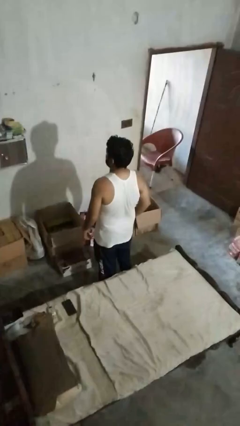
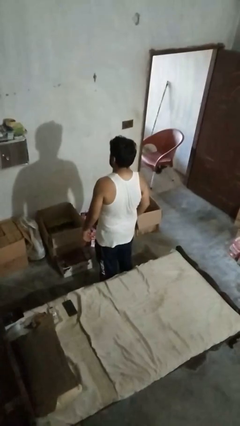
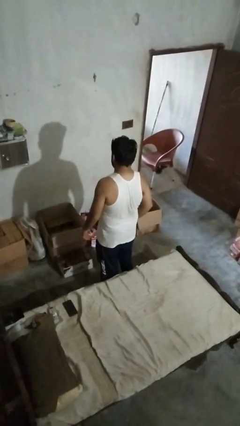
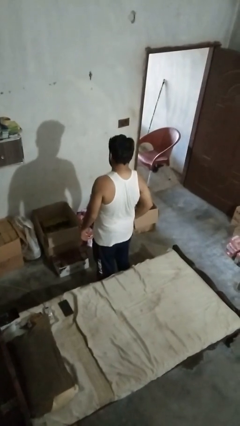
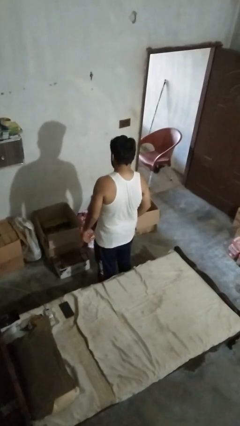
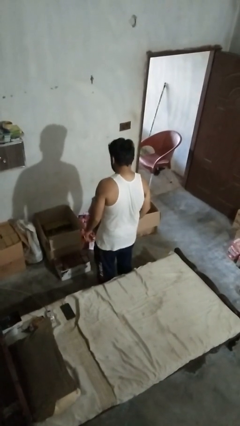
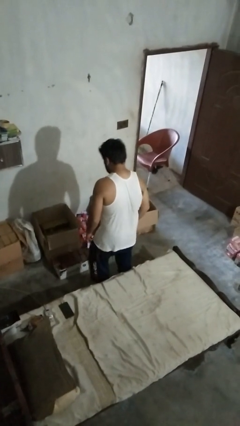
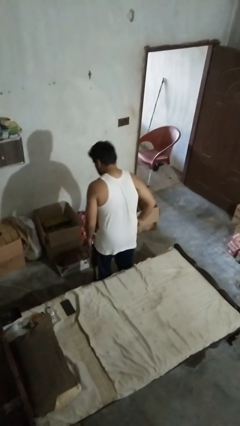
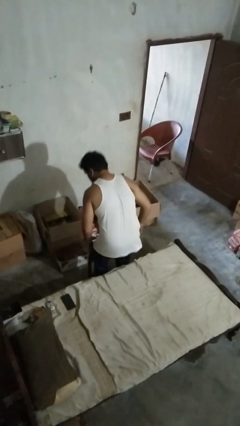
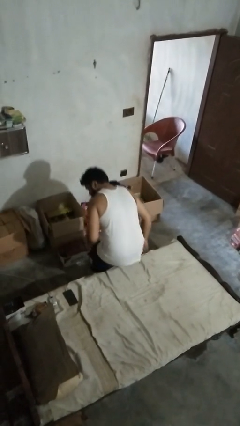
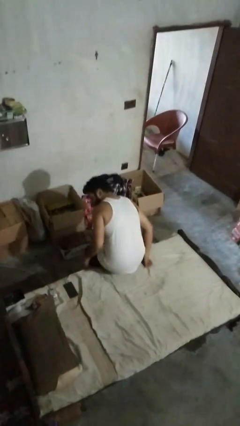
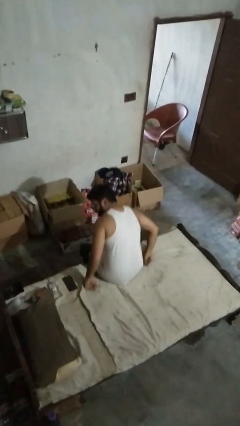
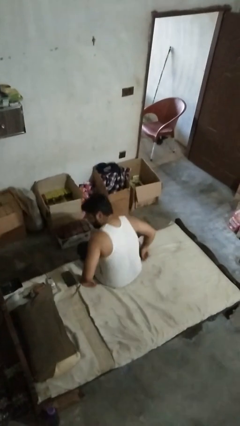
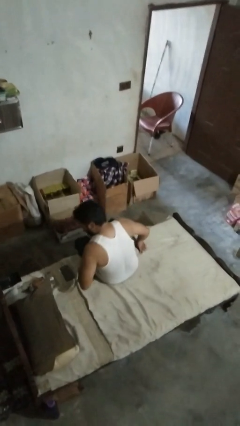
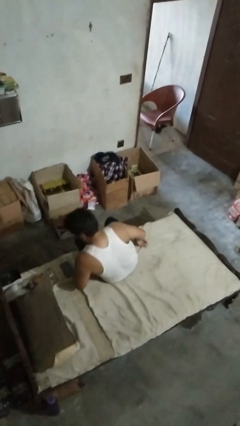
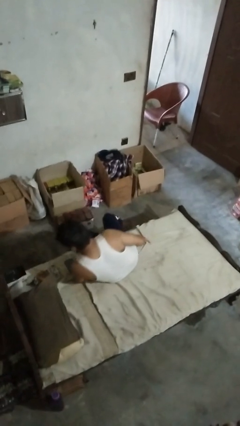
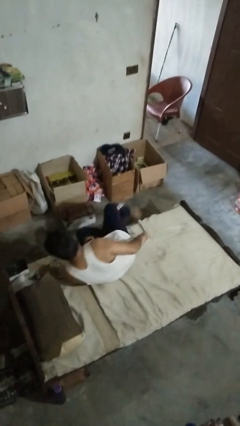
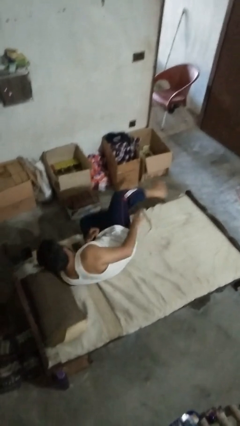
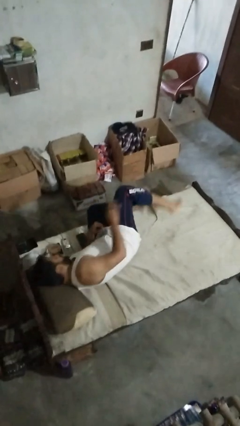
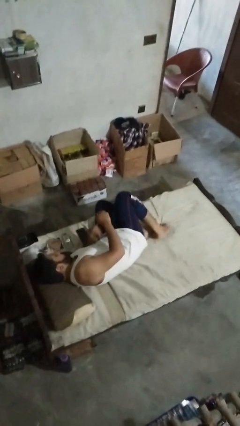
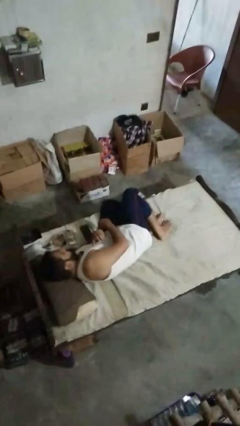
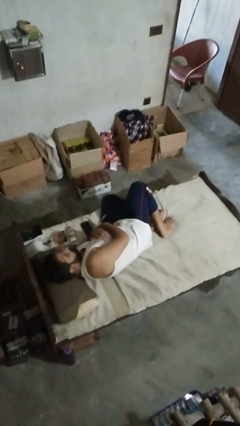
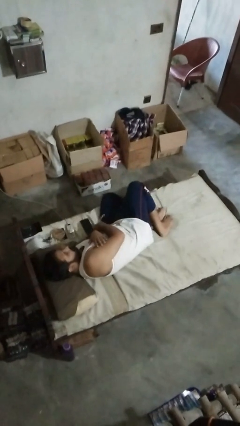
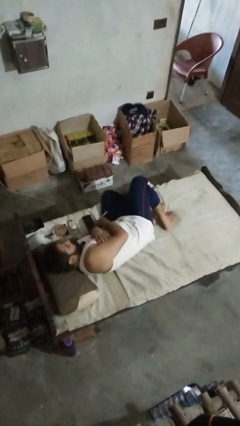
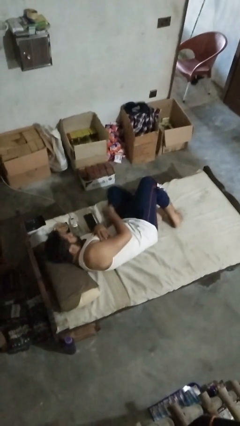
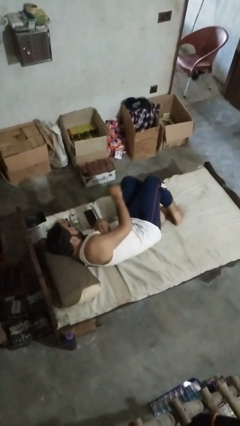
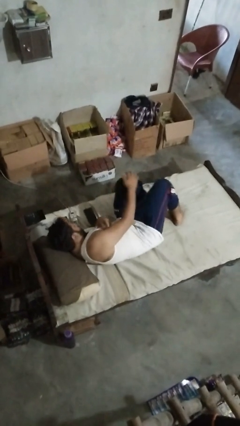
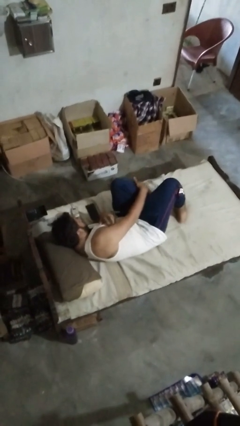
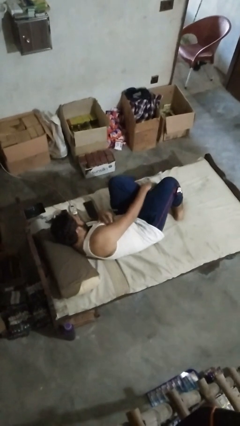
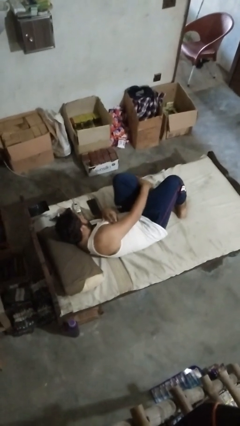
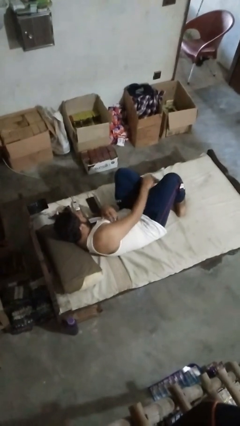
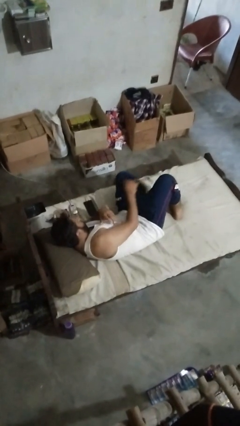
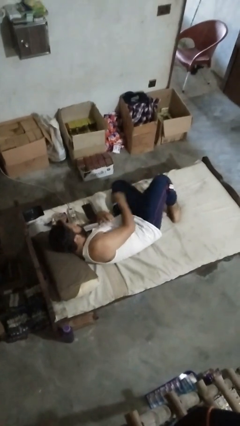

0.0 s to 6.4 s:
person lies down on bed

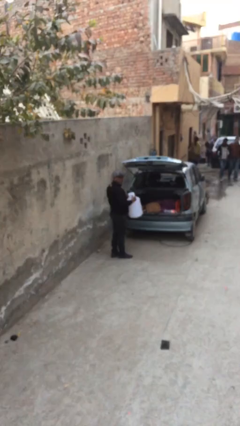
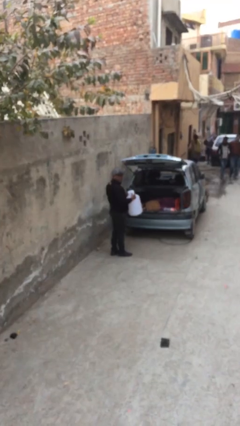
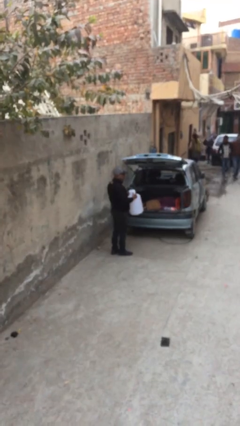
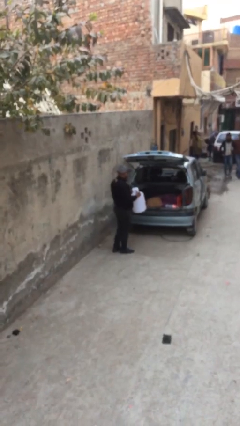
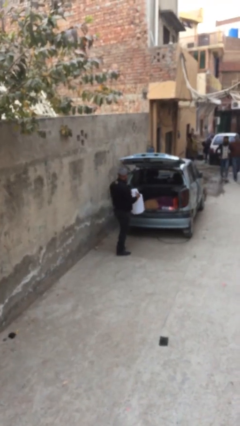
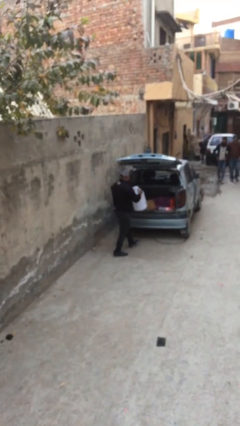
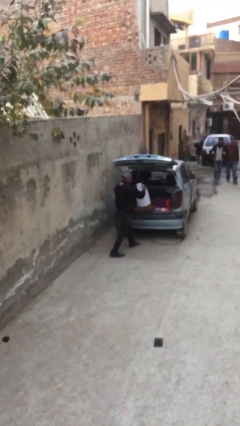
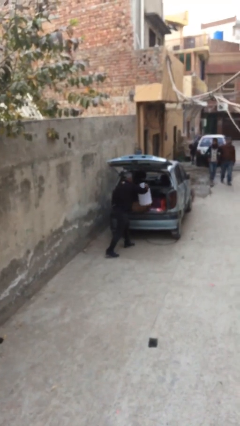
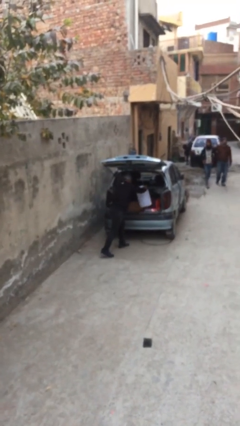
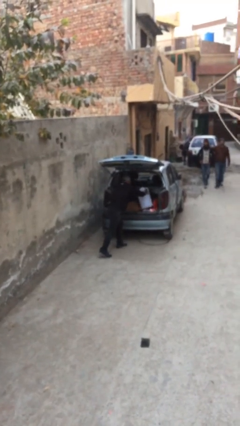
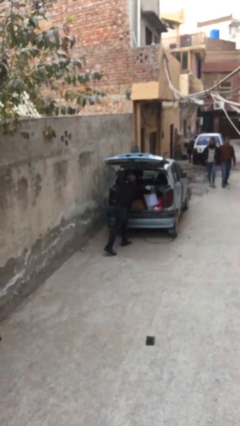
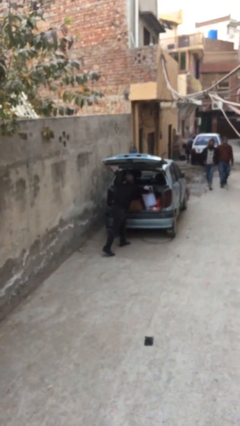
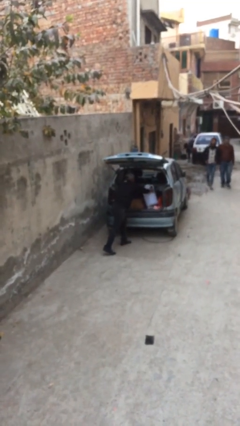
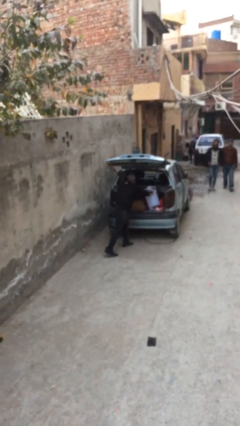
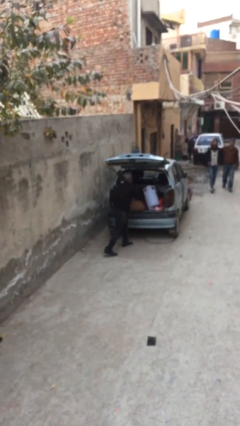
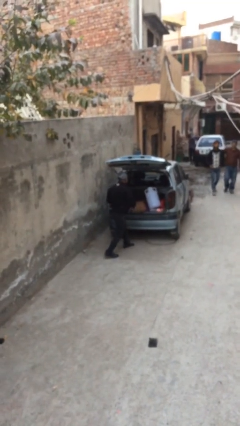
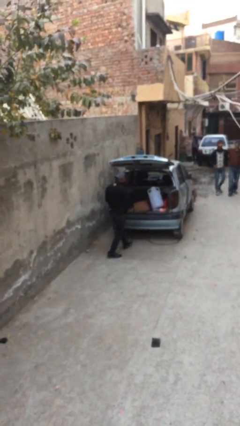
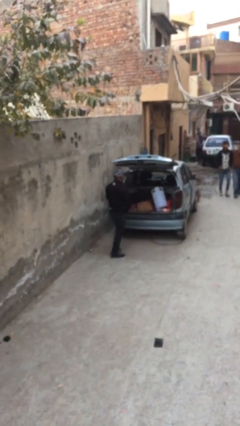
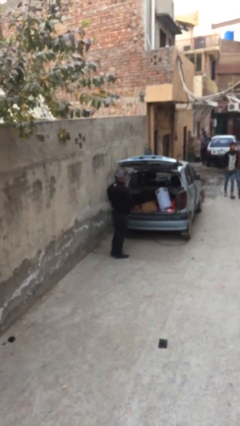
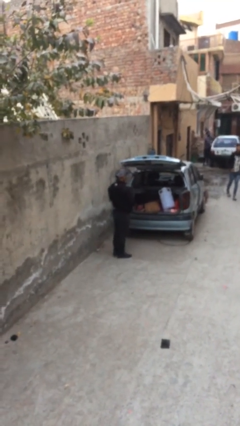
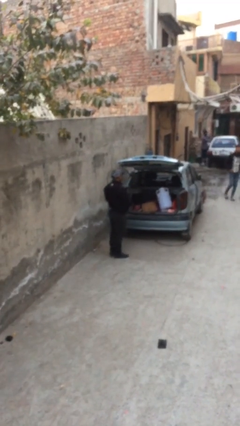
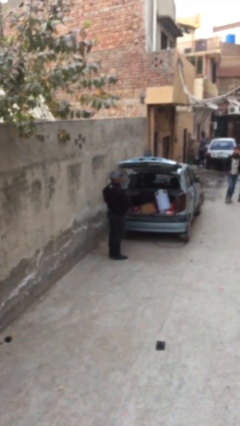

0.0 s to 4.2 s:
person loads car

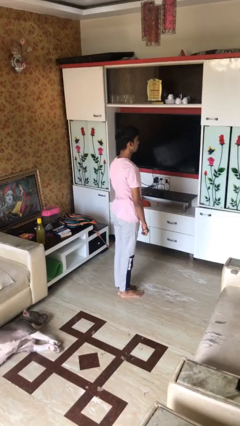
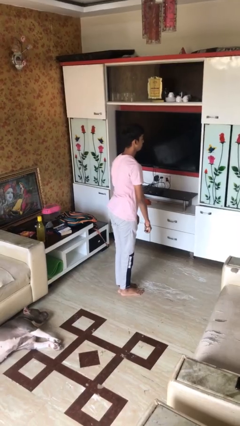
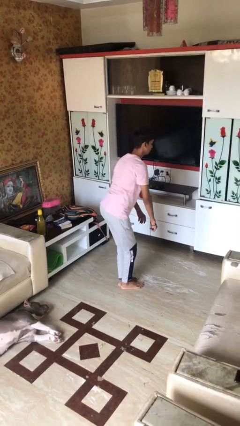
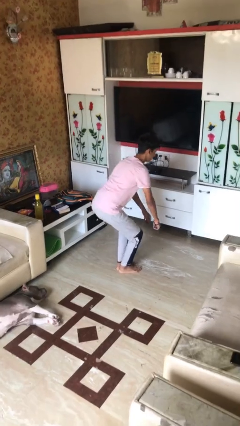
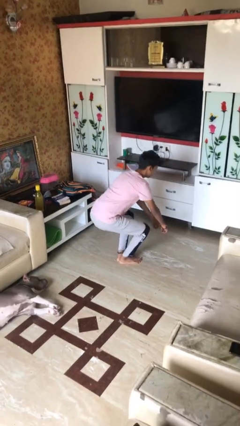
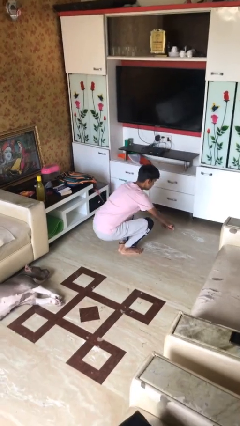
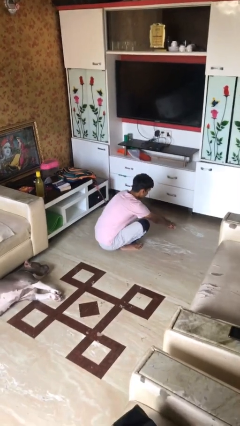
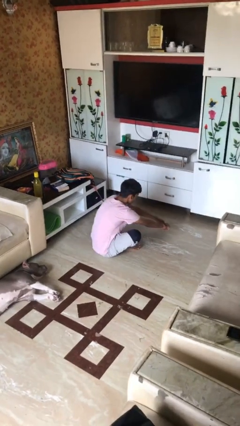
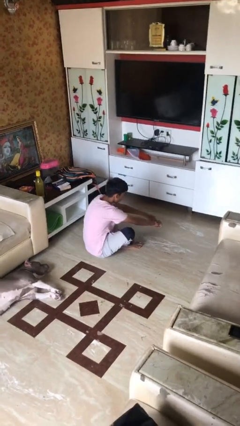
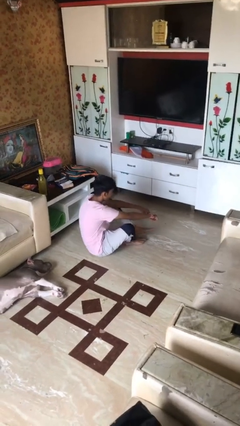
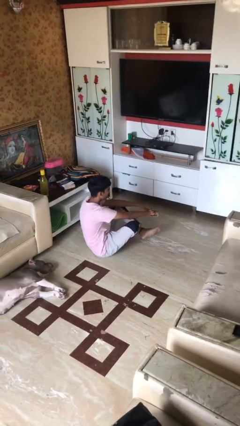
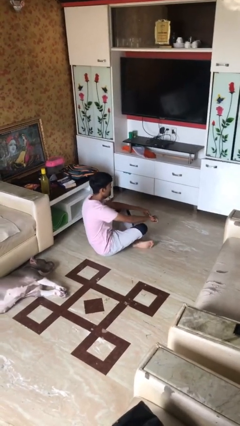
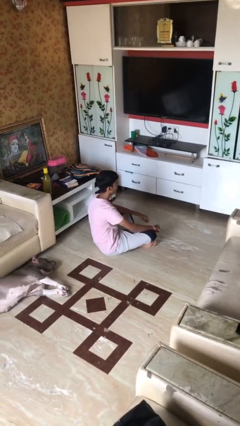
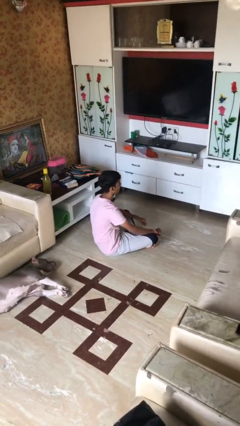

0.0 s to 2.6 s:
person sits crisscross

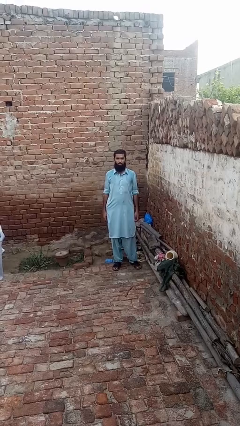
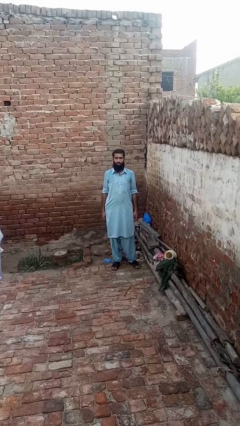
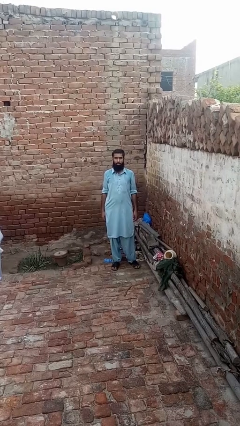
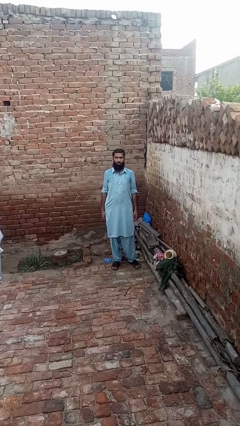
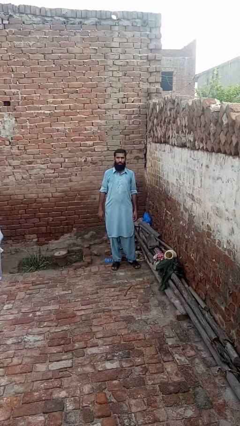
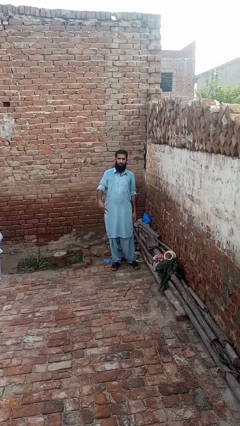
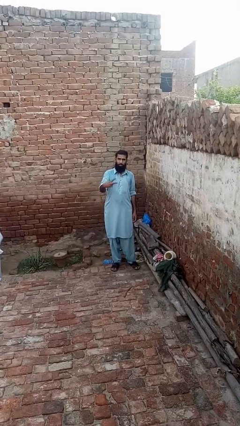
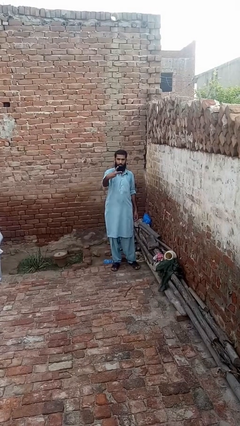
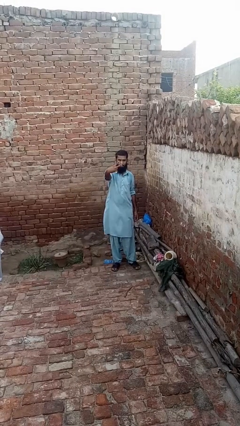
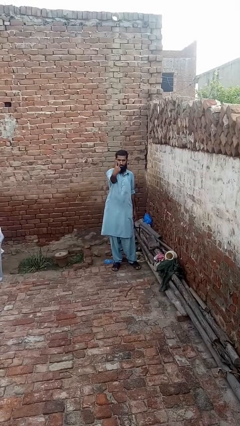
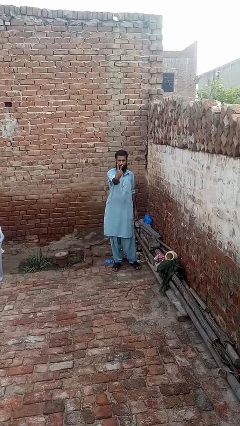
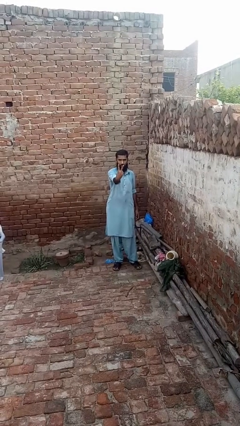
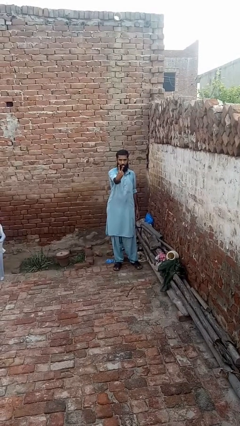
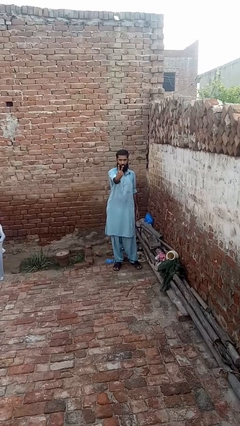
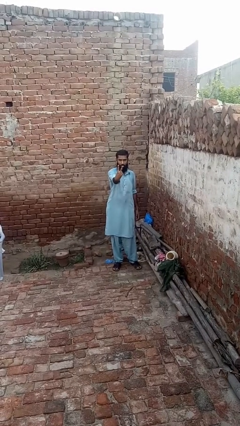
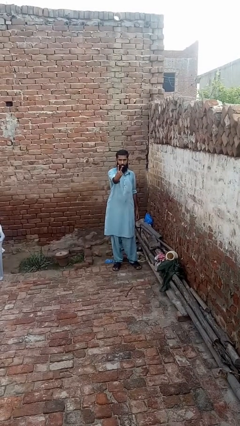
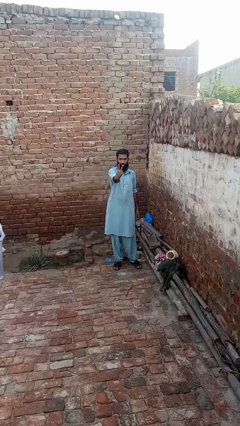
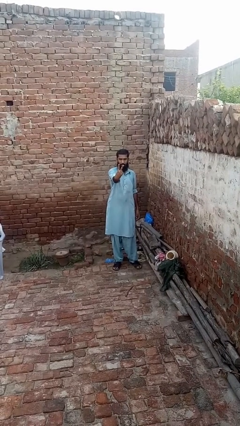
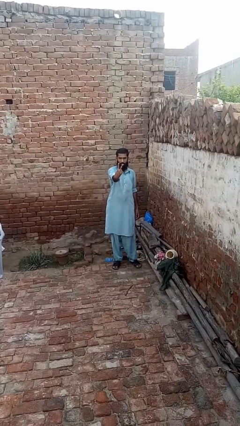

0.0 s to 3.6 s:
person gestures peace

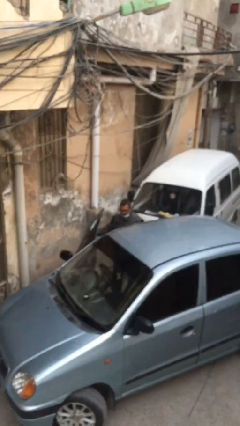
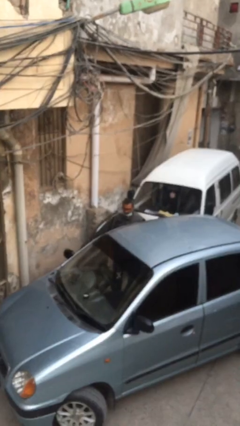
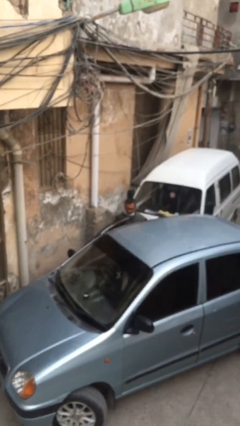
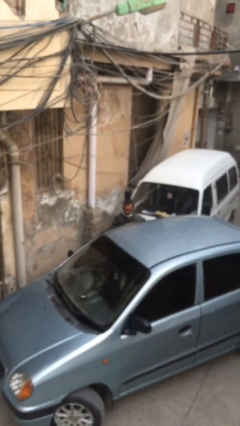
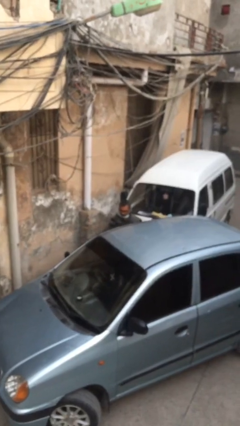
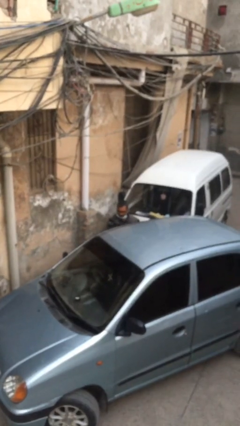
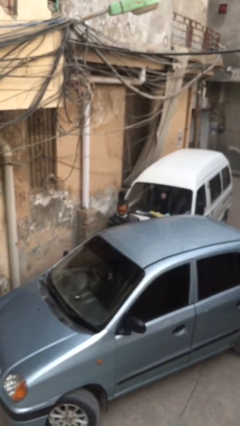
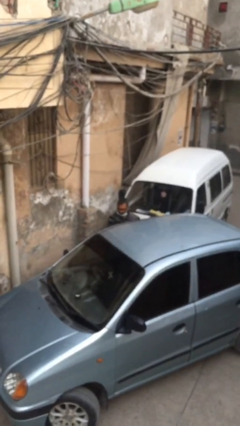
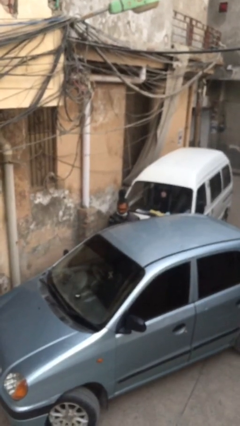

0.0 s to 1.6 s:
person closes car door
